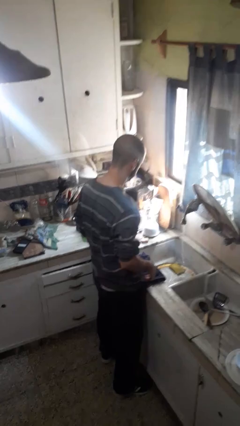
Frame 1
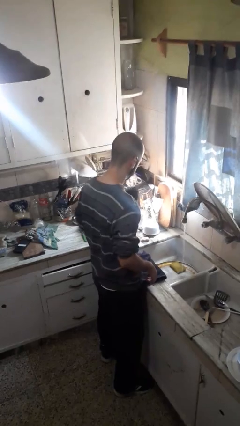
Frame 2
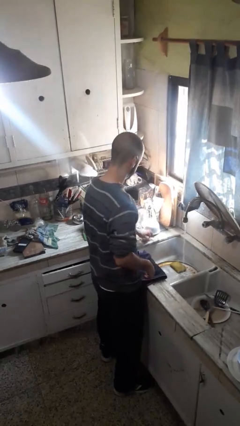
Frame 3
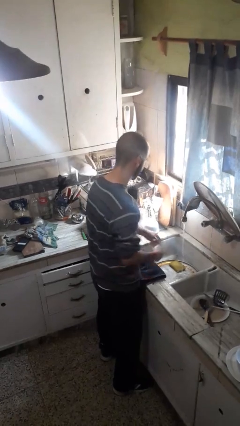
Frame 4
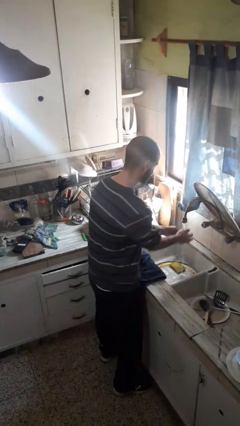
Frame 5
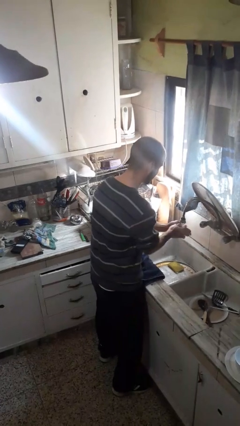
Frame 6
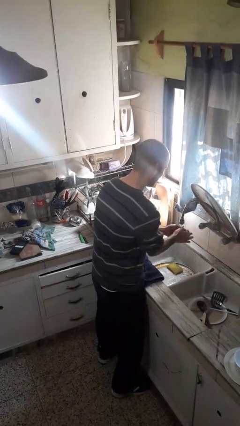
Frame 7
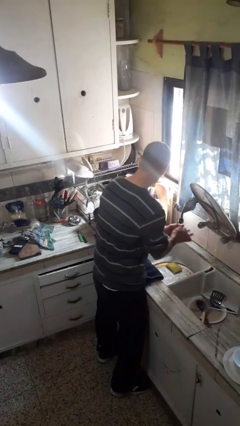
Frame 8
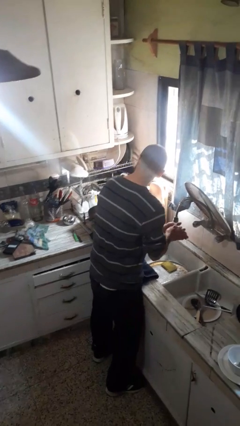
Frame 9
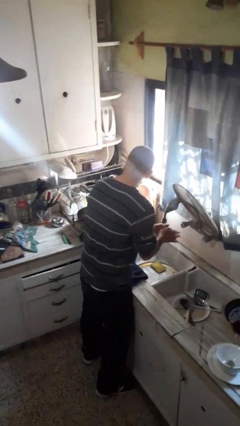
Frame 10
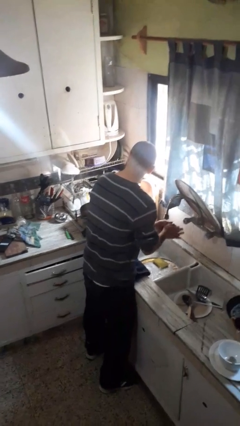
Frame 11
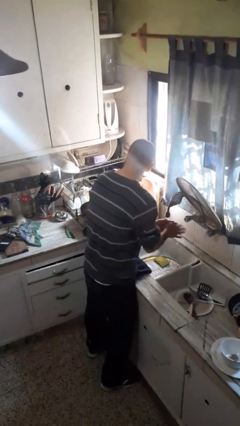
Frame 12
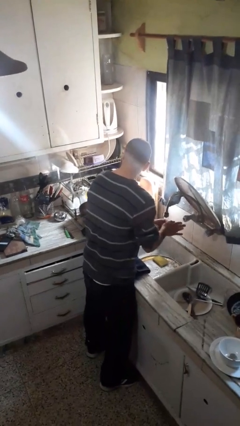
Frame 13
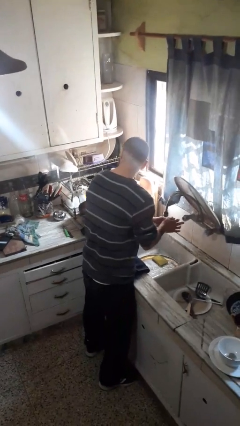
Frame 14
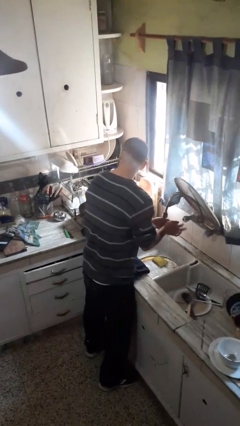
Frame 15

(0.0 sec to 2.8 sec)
person washes hands

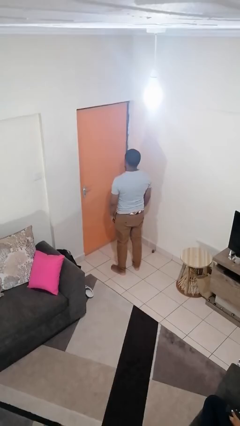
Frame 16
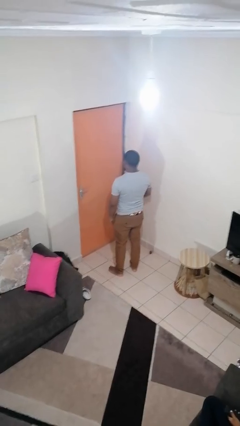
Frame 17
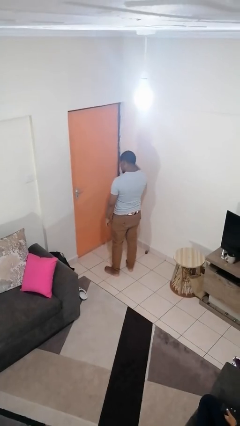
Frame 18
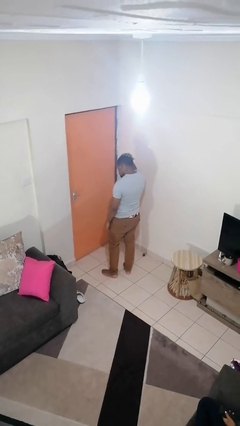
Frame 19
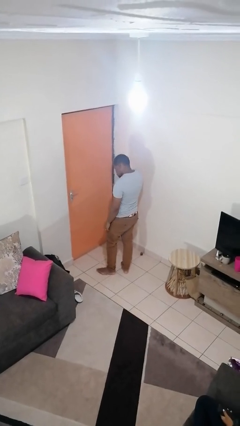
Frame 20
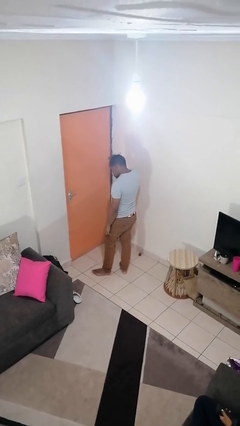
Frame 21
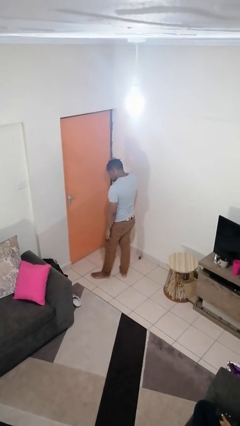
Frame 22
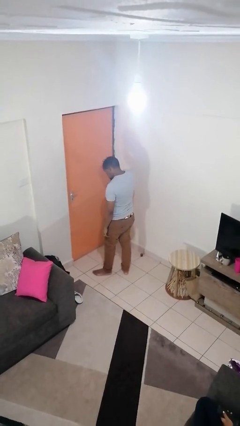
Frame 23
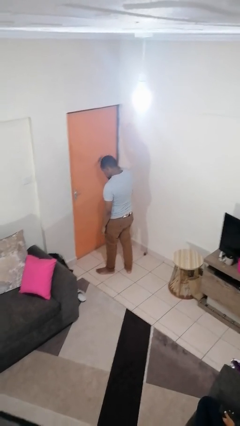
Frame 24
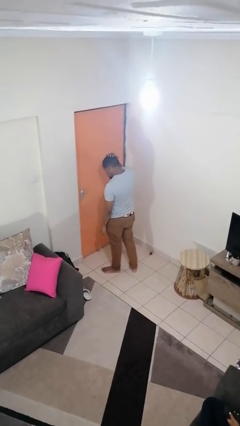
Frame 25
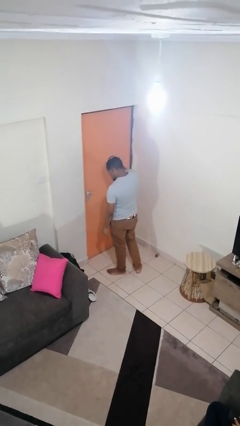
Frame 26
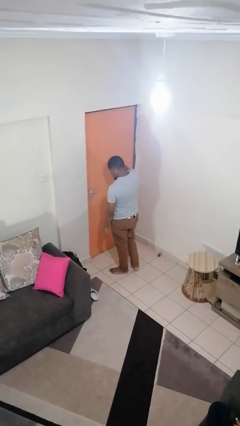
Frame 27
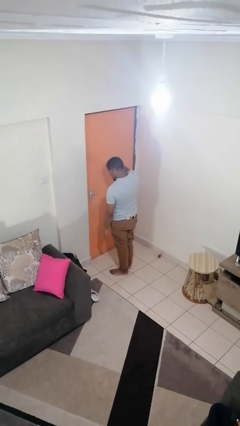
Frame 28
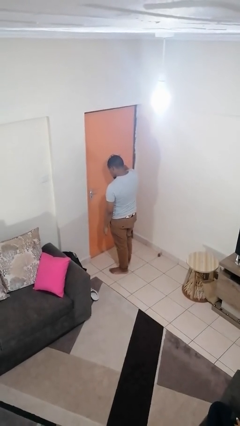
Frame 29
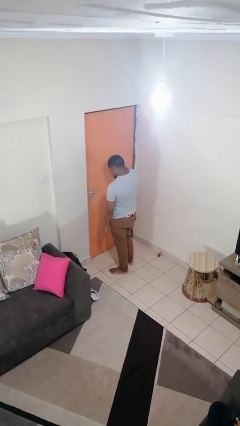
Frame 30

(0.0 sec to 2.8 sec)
person strokes hair

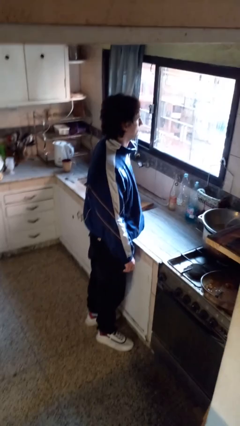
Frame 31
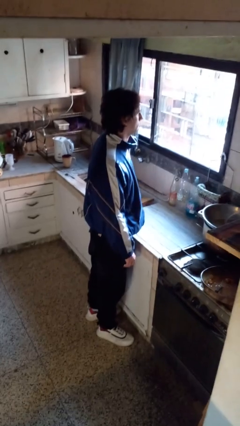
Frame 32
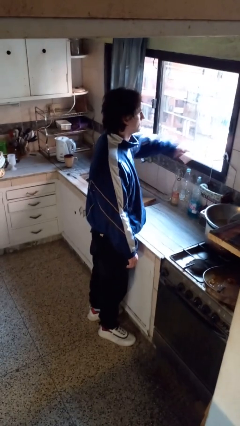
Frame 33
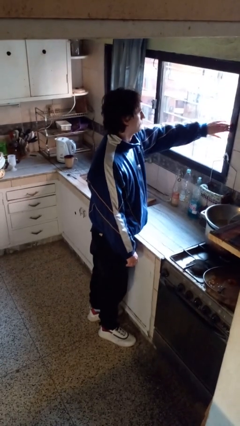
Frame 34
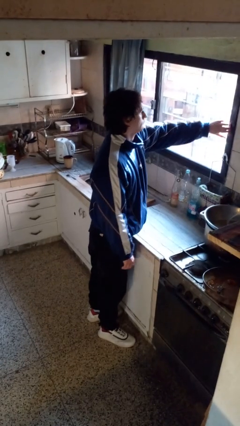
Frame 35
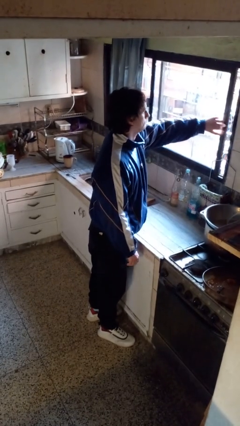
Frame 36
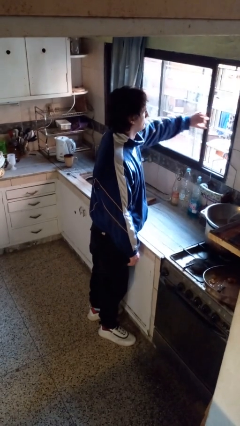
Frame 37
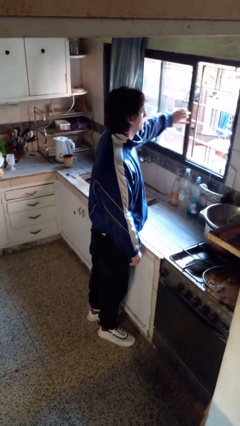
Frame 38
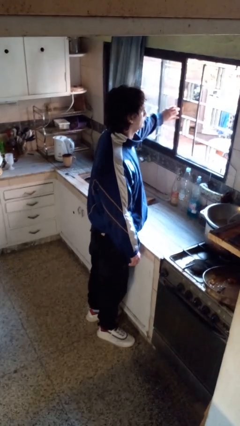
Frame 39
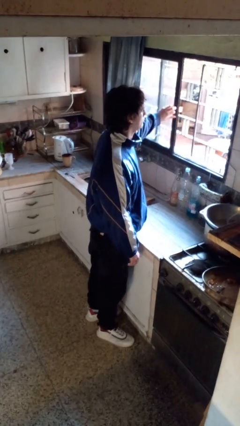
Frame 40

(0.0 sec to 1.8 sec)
person opens home window

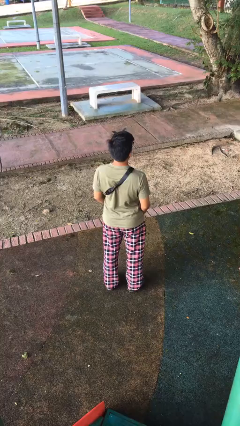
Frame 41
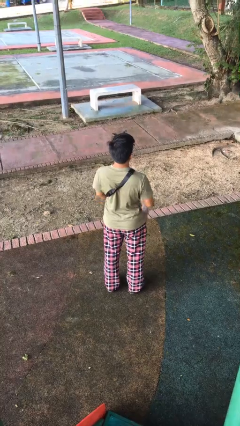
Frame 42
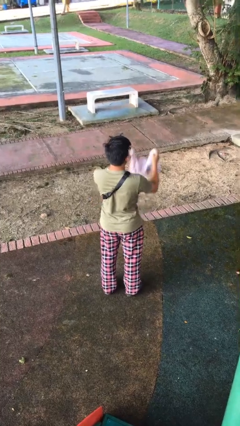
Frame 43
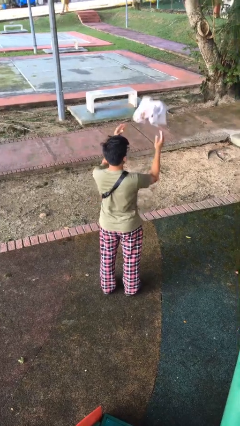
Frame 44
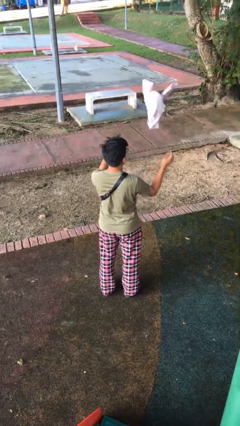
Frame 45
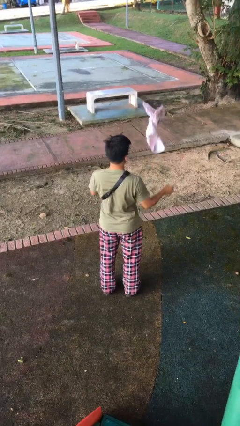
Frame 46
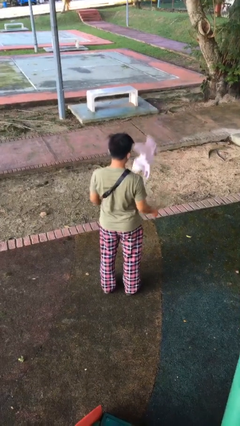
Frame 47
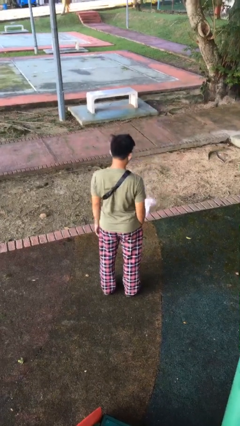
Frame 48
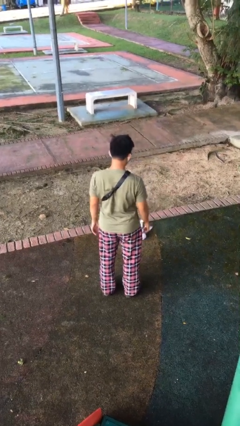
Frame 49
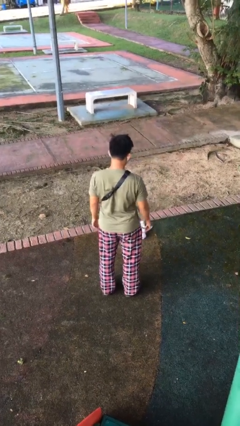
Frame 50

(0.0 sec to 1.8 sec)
person throws object into air

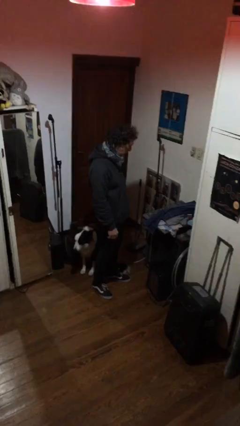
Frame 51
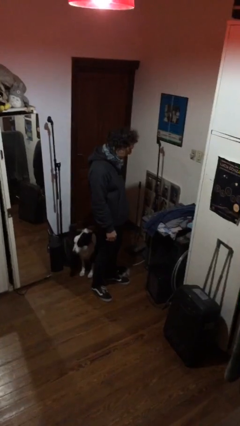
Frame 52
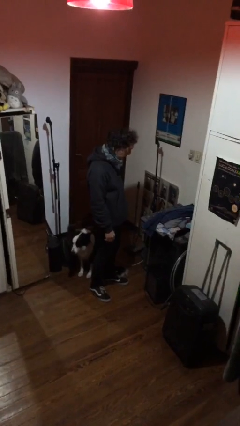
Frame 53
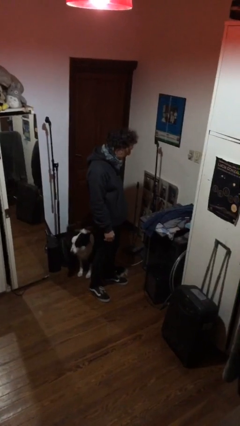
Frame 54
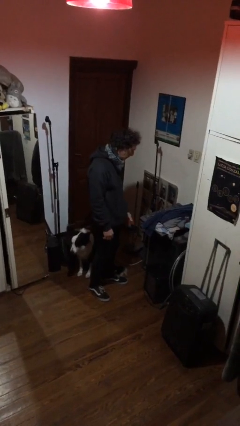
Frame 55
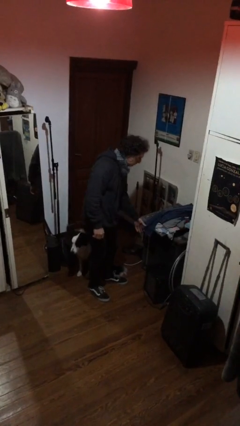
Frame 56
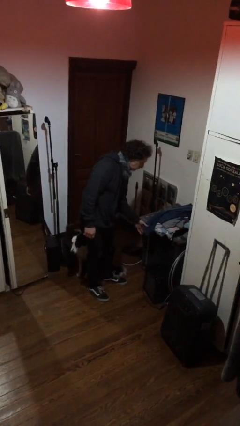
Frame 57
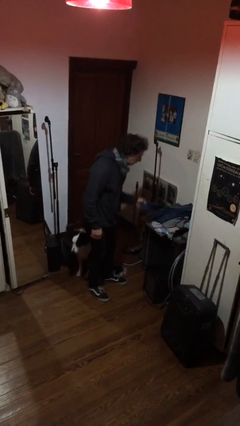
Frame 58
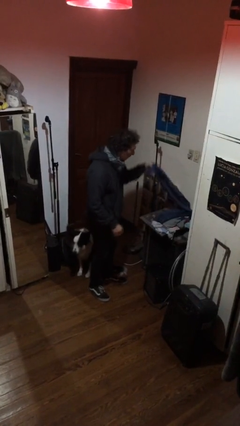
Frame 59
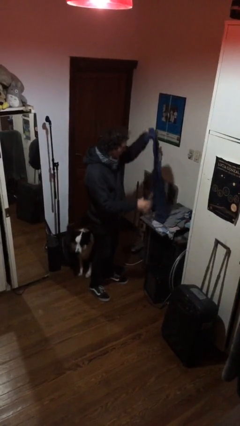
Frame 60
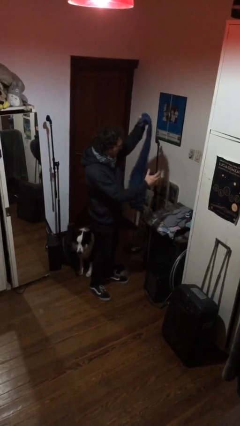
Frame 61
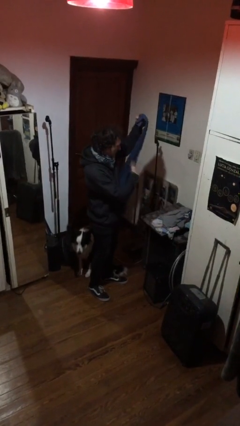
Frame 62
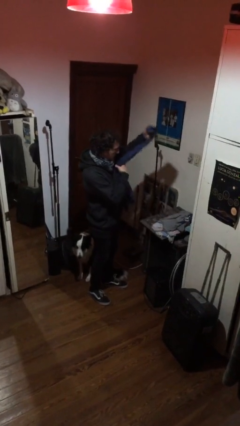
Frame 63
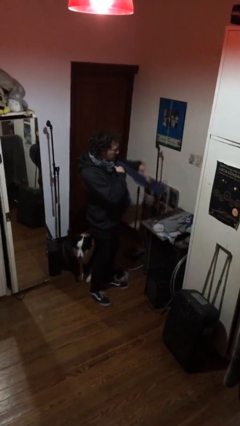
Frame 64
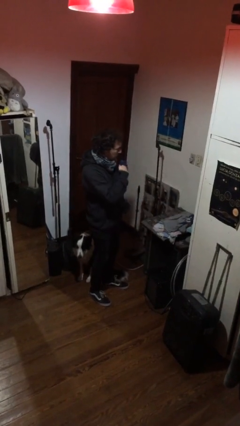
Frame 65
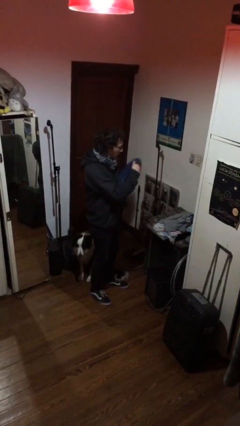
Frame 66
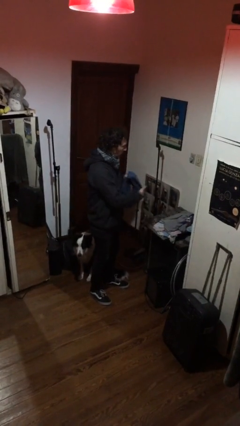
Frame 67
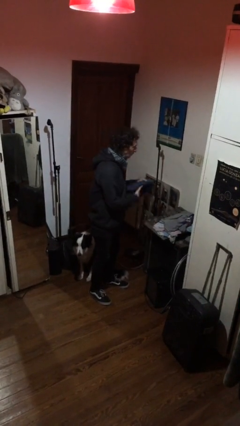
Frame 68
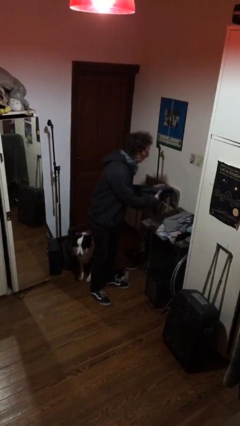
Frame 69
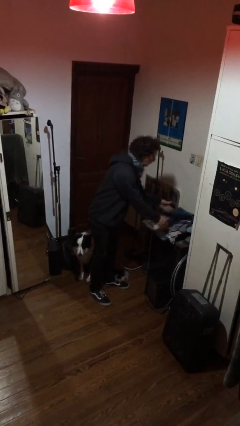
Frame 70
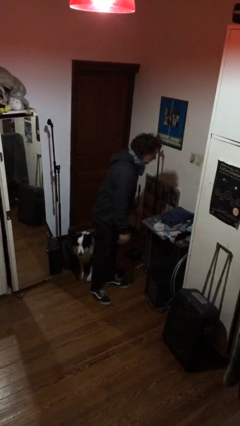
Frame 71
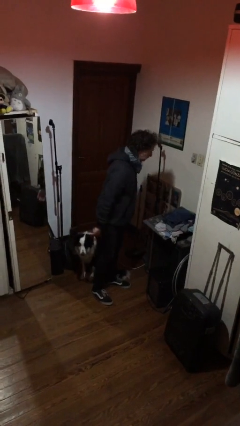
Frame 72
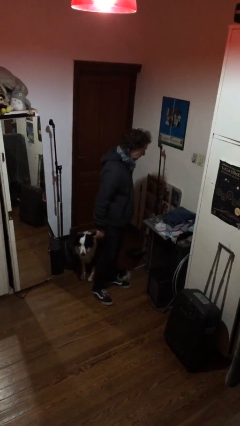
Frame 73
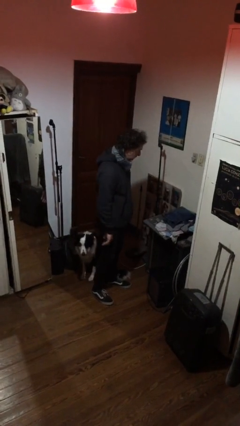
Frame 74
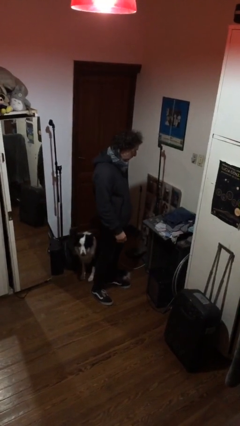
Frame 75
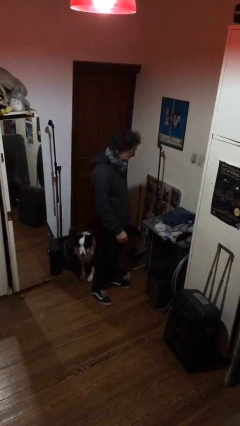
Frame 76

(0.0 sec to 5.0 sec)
person folds pants

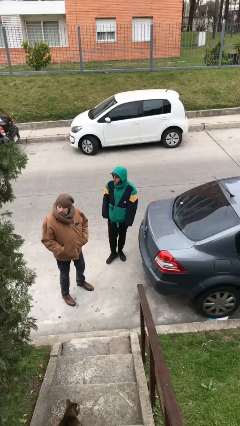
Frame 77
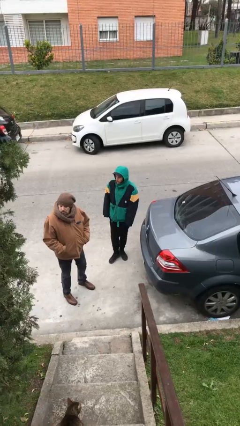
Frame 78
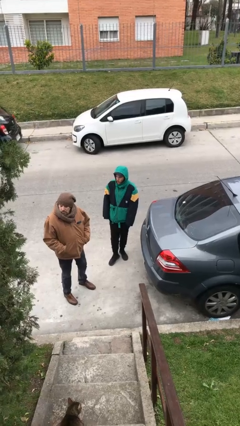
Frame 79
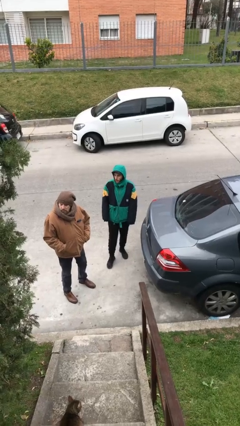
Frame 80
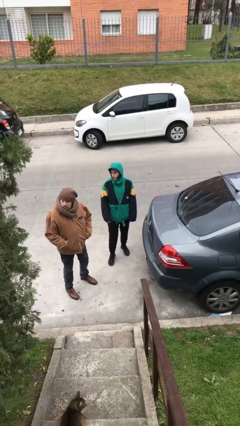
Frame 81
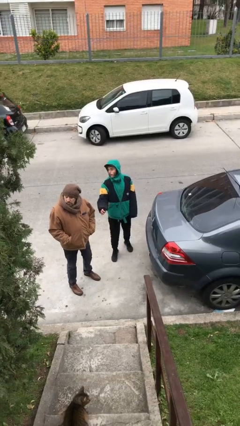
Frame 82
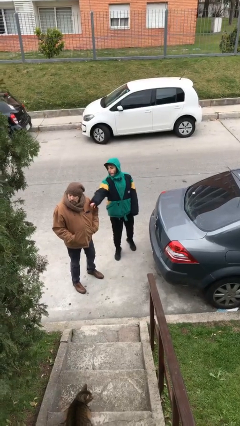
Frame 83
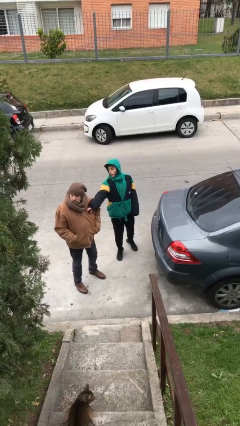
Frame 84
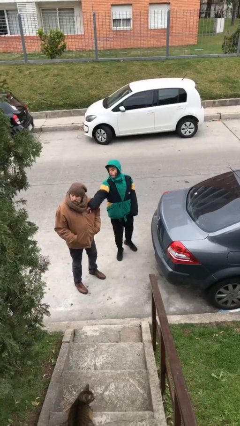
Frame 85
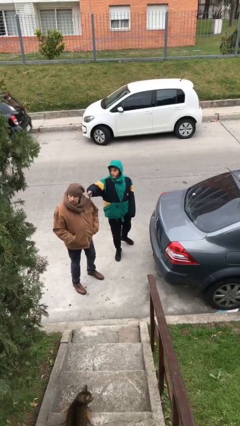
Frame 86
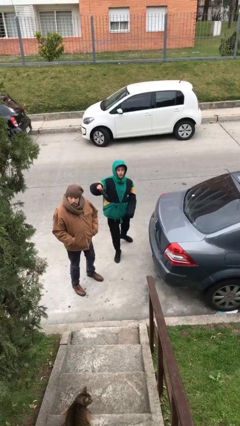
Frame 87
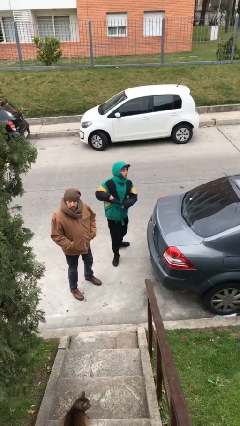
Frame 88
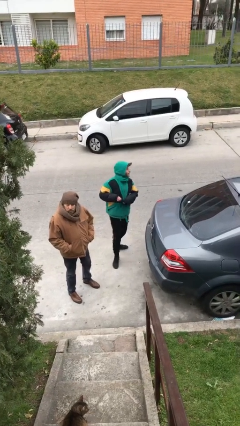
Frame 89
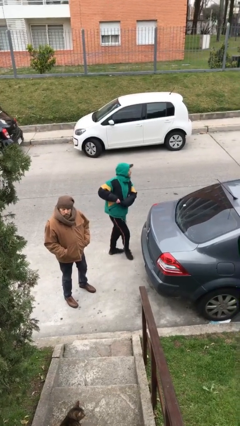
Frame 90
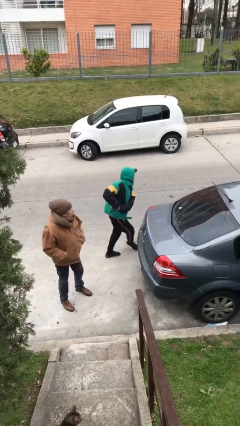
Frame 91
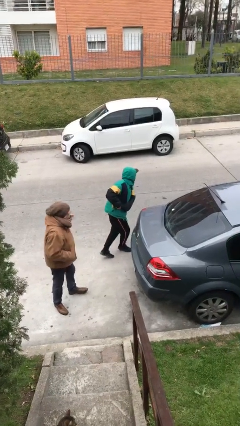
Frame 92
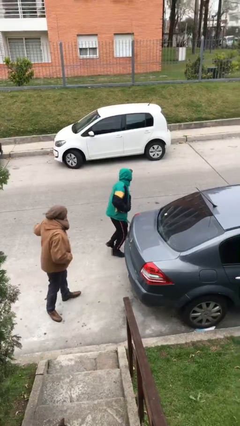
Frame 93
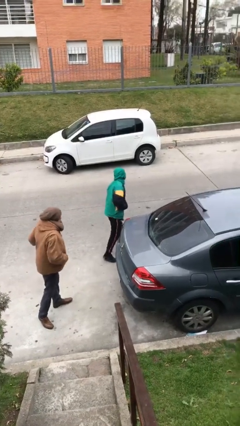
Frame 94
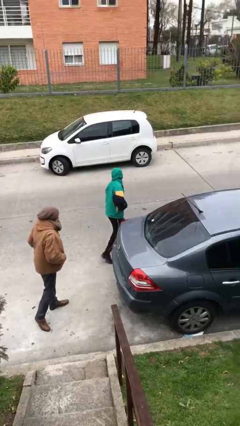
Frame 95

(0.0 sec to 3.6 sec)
person steals object from person
